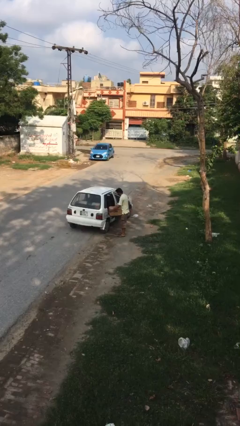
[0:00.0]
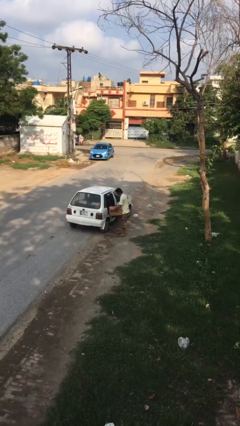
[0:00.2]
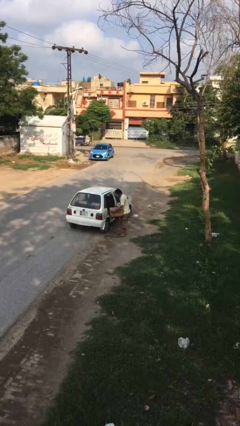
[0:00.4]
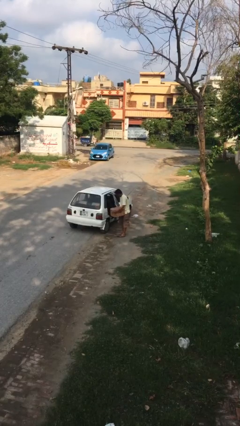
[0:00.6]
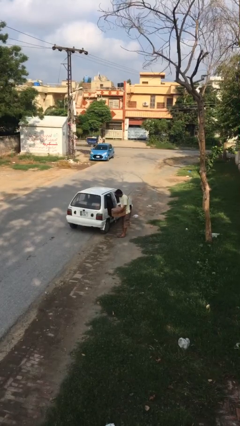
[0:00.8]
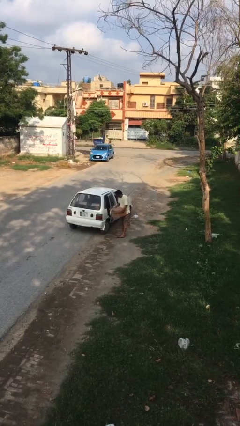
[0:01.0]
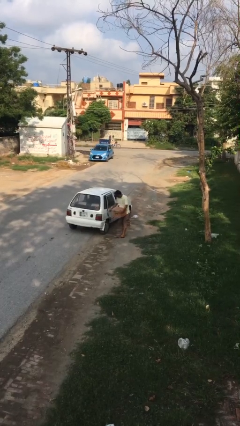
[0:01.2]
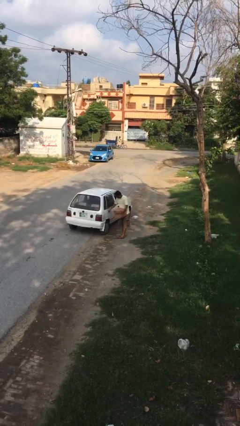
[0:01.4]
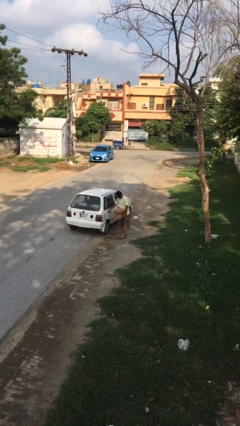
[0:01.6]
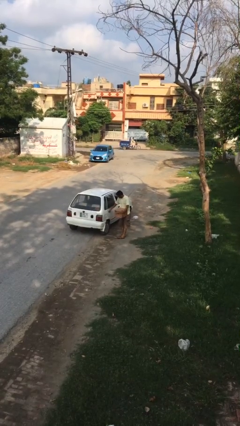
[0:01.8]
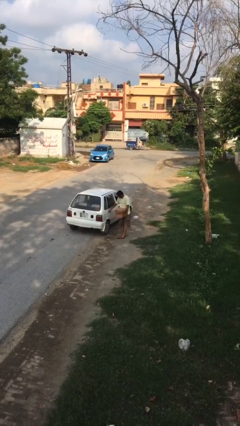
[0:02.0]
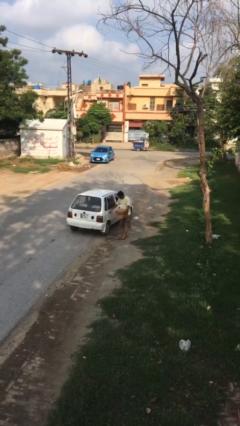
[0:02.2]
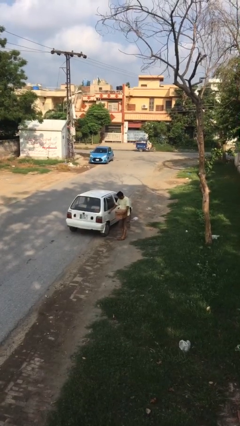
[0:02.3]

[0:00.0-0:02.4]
person closes car door

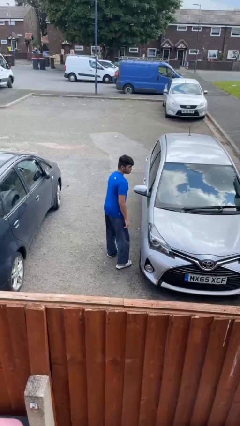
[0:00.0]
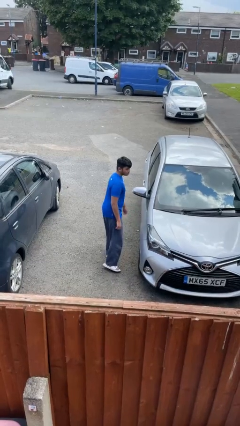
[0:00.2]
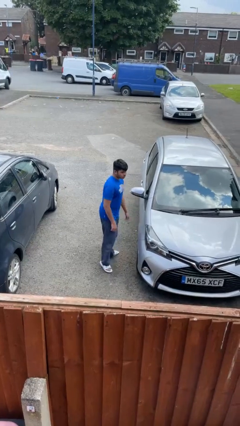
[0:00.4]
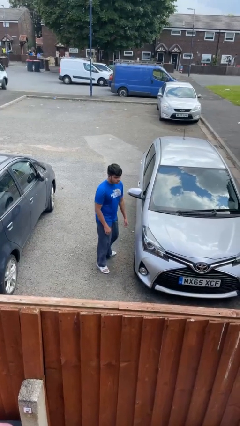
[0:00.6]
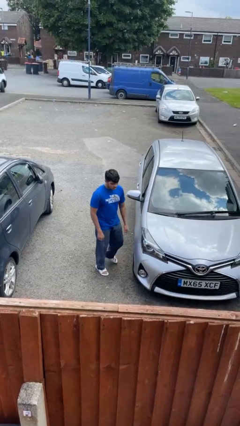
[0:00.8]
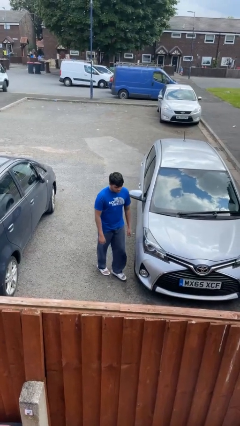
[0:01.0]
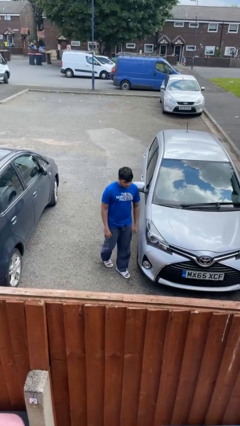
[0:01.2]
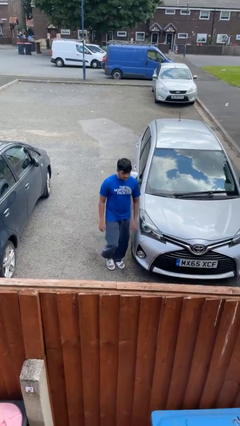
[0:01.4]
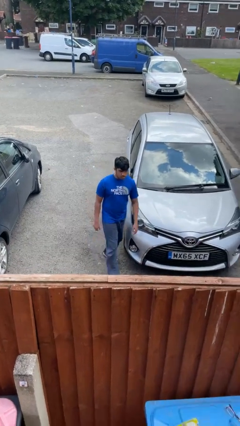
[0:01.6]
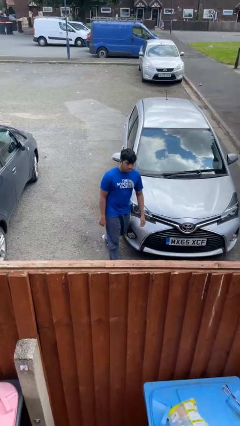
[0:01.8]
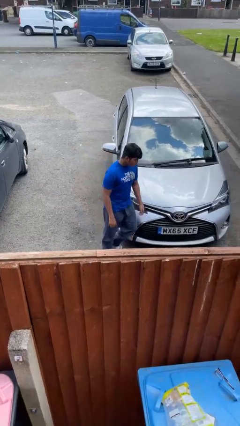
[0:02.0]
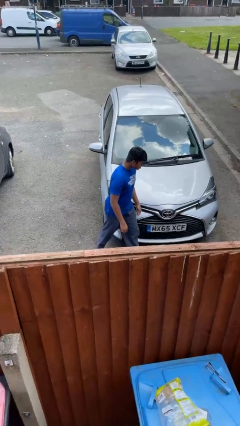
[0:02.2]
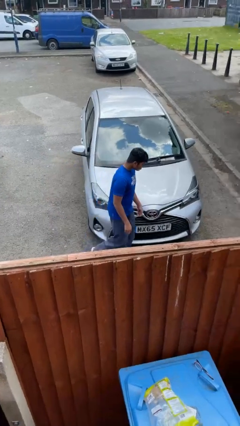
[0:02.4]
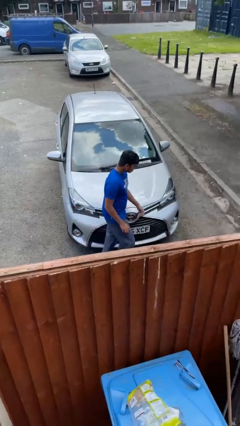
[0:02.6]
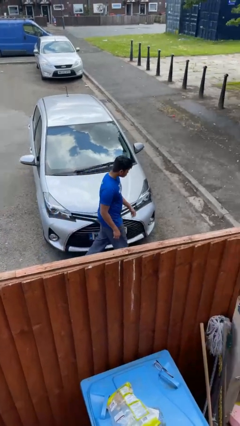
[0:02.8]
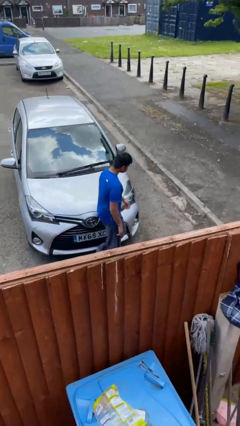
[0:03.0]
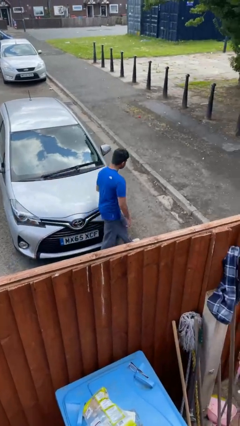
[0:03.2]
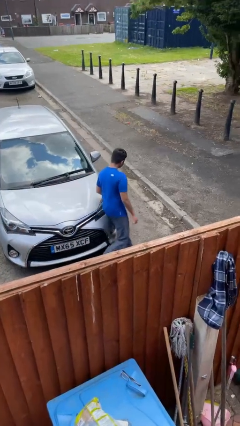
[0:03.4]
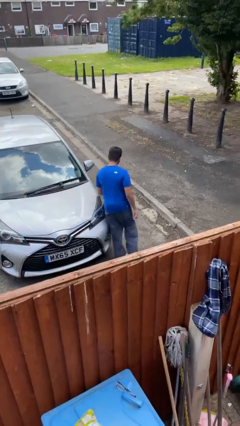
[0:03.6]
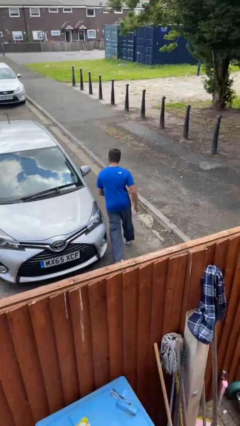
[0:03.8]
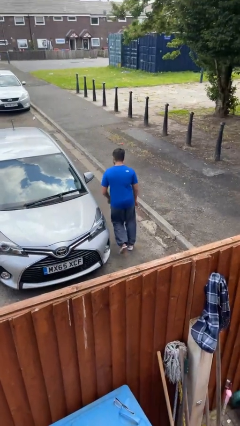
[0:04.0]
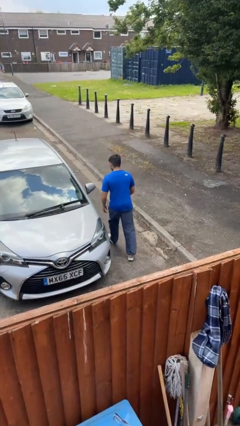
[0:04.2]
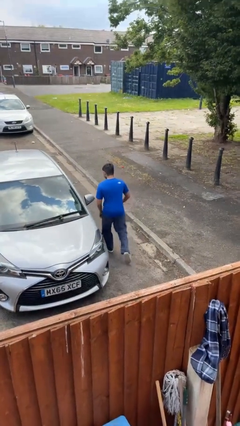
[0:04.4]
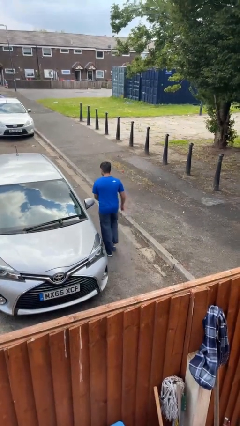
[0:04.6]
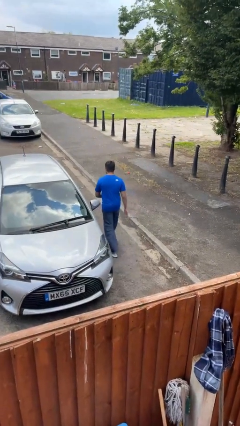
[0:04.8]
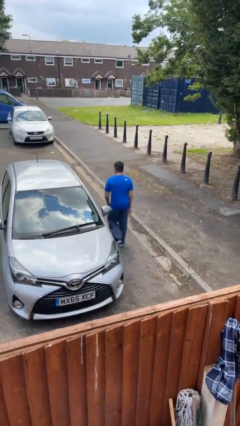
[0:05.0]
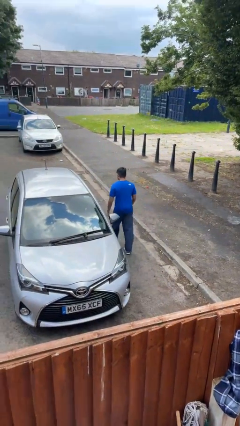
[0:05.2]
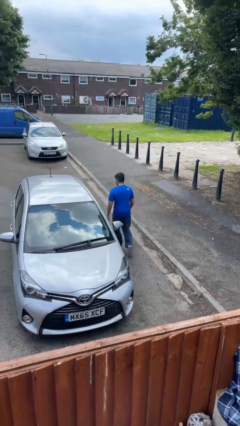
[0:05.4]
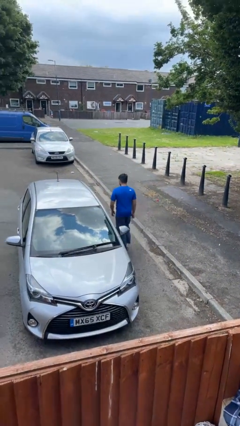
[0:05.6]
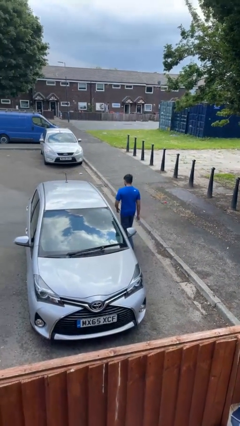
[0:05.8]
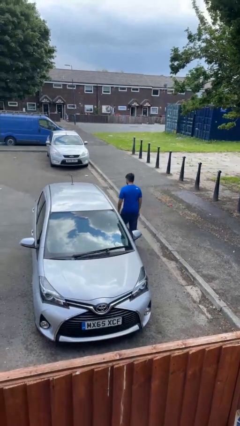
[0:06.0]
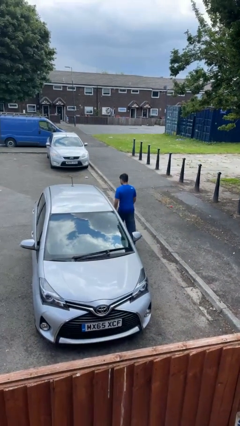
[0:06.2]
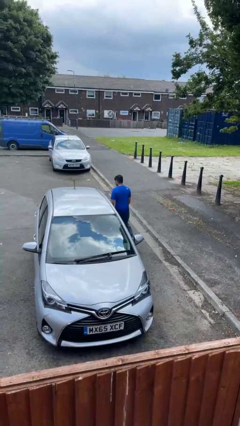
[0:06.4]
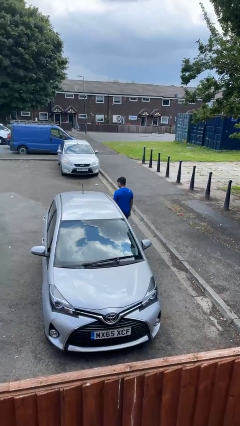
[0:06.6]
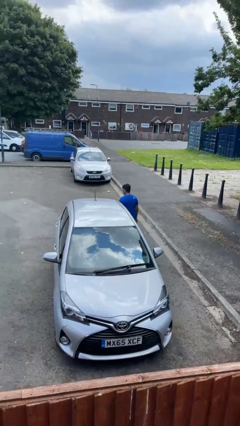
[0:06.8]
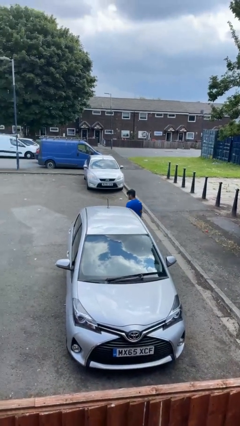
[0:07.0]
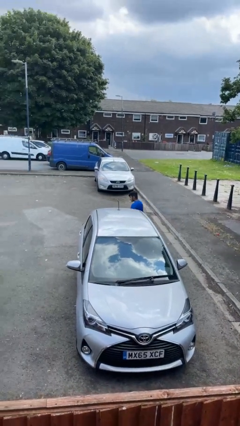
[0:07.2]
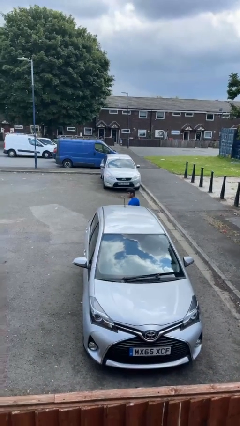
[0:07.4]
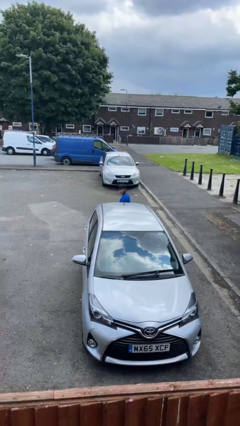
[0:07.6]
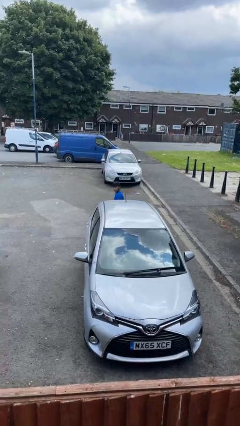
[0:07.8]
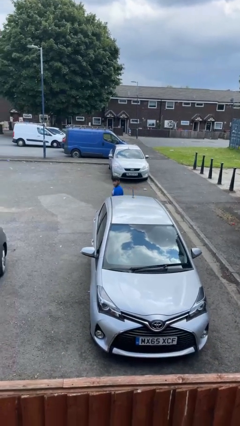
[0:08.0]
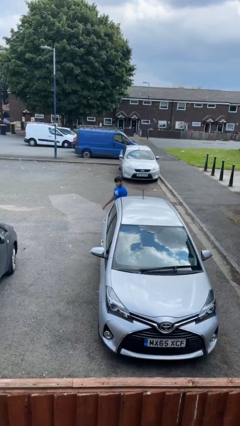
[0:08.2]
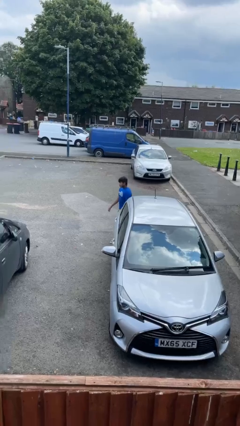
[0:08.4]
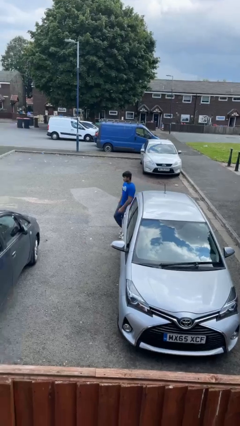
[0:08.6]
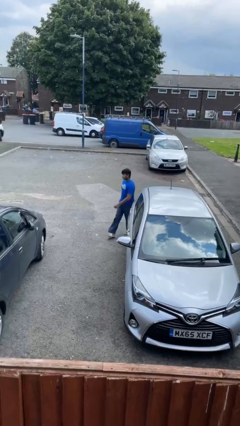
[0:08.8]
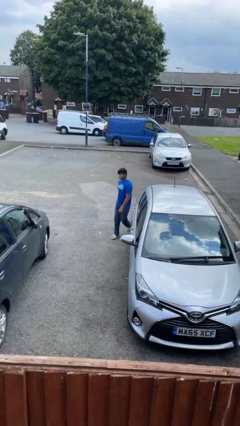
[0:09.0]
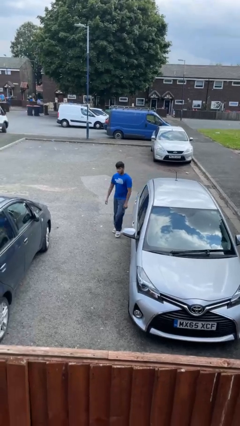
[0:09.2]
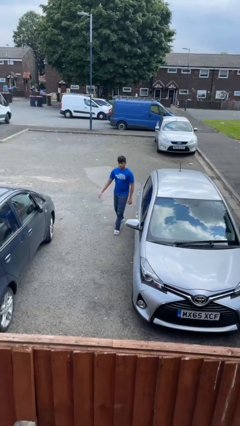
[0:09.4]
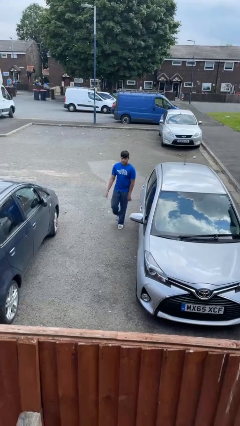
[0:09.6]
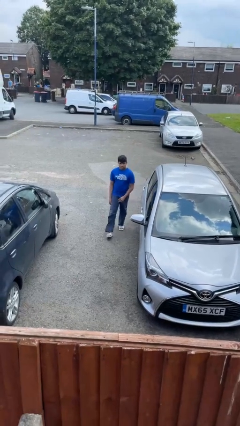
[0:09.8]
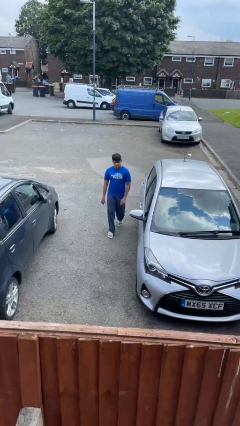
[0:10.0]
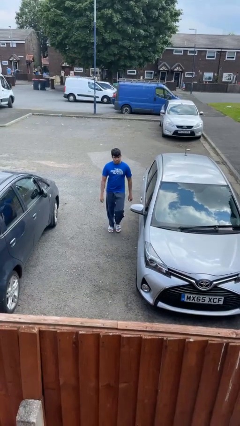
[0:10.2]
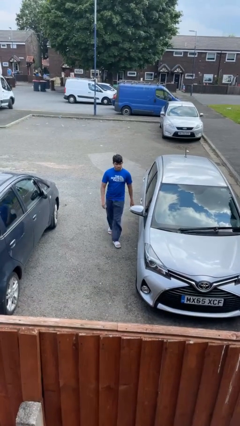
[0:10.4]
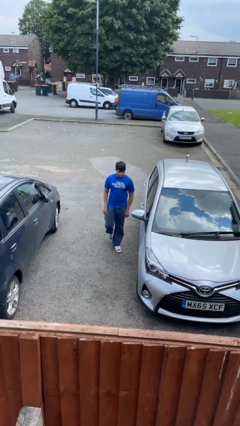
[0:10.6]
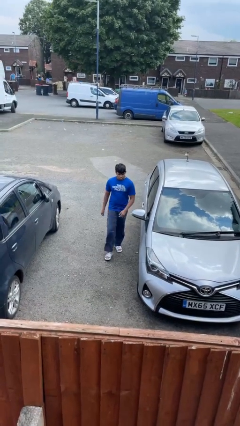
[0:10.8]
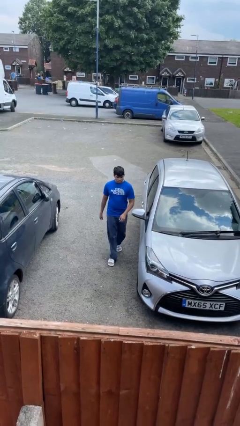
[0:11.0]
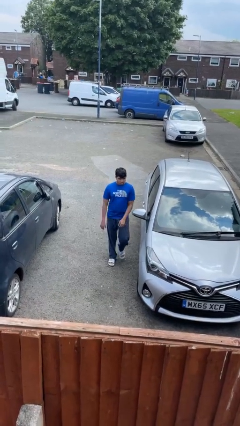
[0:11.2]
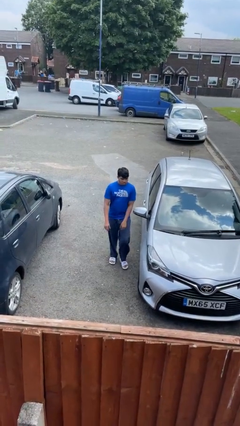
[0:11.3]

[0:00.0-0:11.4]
person walks around car

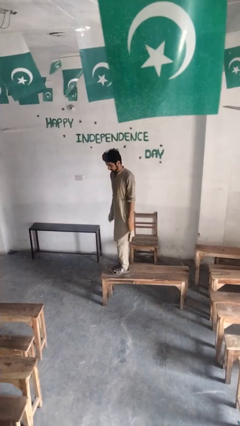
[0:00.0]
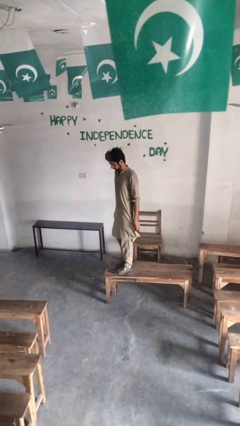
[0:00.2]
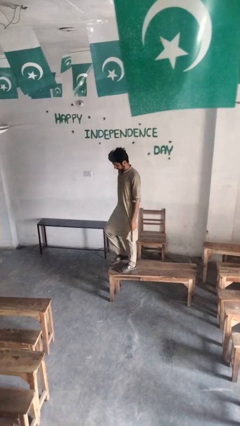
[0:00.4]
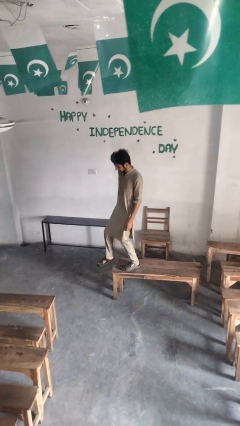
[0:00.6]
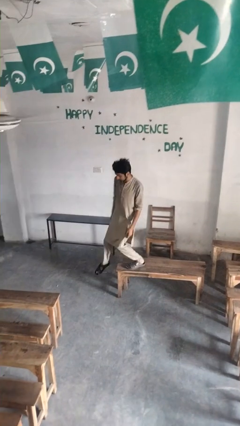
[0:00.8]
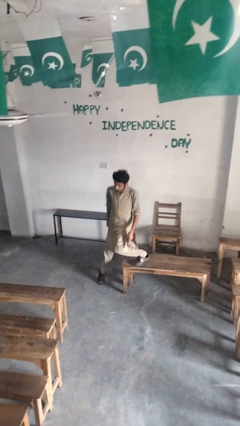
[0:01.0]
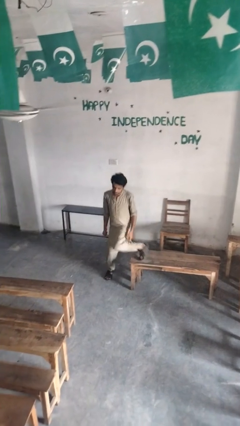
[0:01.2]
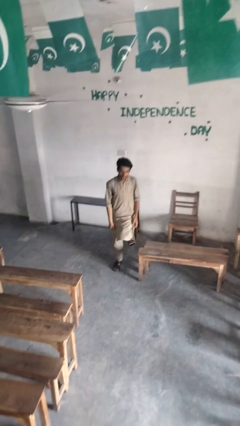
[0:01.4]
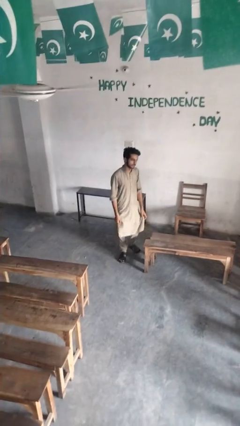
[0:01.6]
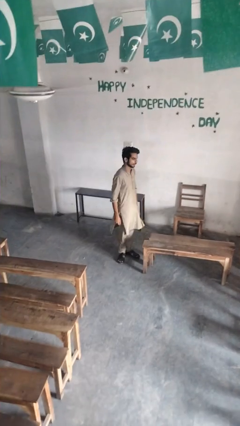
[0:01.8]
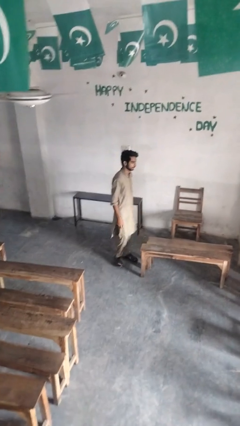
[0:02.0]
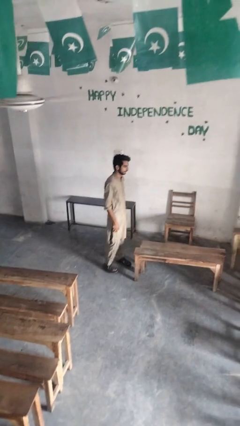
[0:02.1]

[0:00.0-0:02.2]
person climbs off table

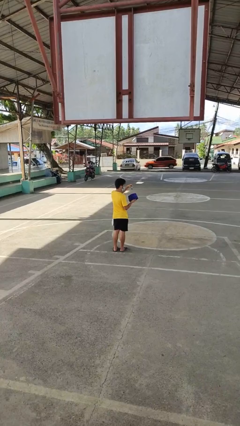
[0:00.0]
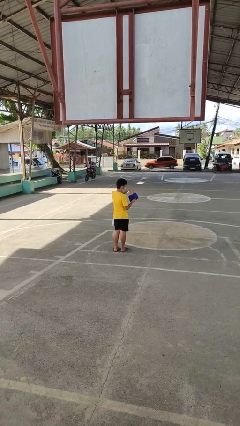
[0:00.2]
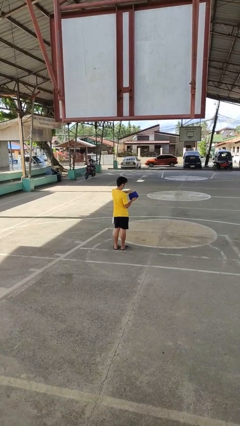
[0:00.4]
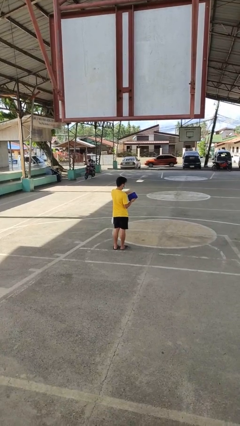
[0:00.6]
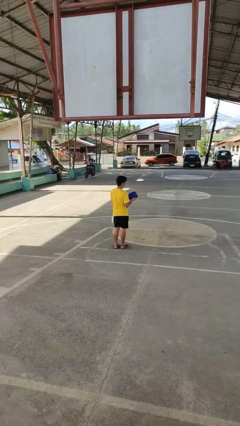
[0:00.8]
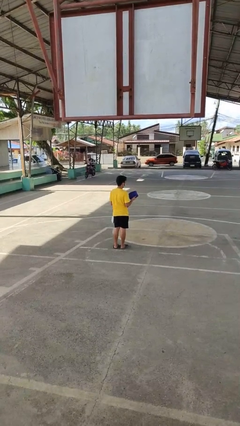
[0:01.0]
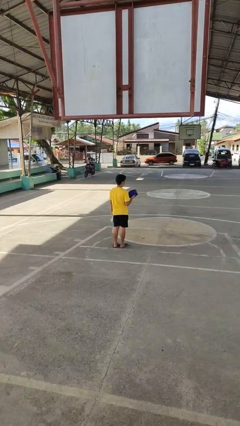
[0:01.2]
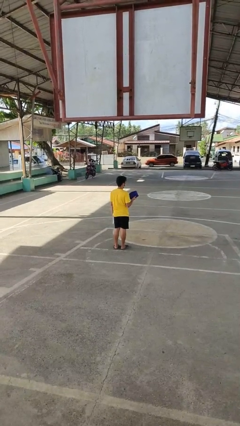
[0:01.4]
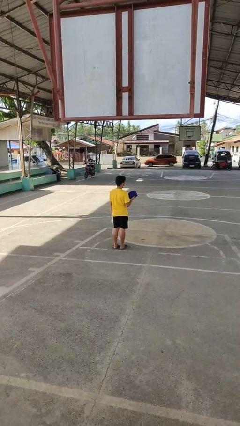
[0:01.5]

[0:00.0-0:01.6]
person puts object into purse
